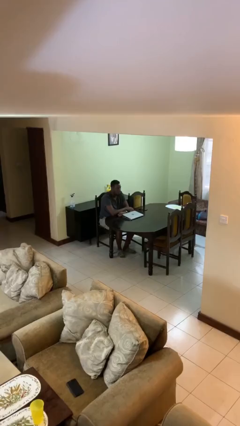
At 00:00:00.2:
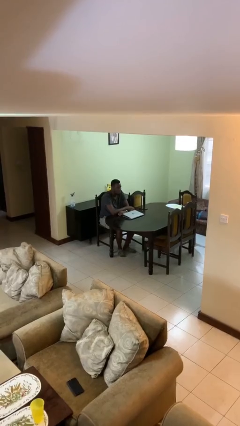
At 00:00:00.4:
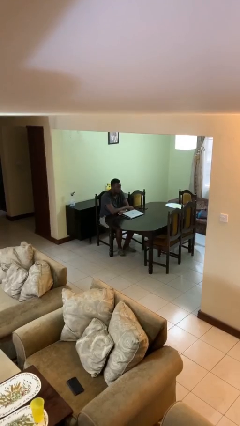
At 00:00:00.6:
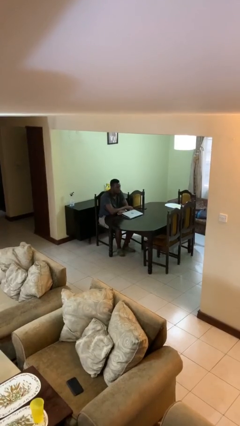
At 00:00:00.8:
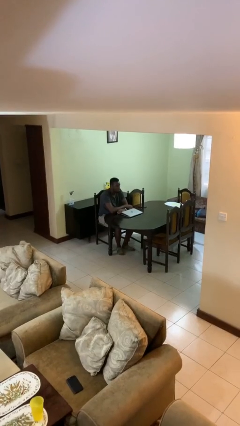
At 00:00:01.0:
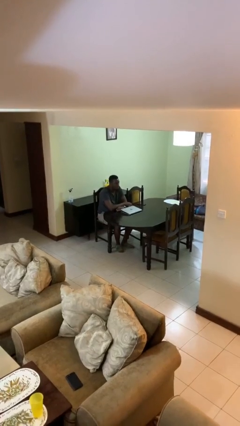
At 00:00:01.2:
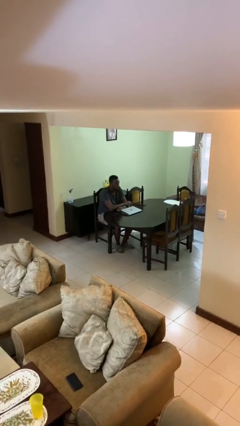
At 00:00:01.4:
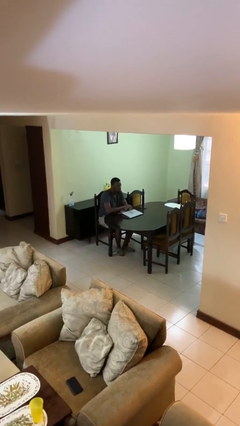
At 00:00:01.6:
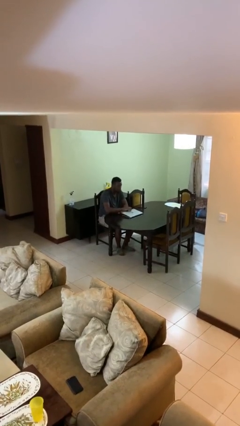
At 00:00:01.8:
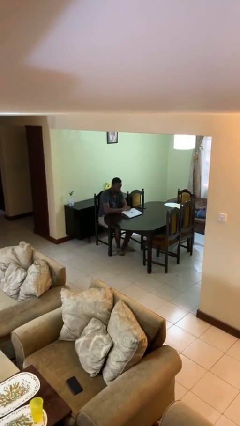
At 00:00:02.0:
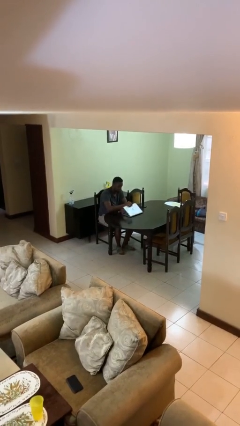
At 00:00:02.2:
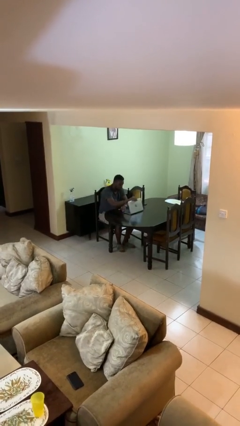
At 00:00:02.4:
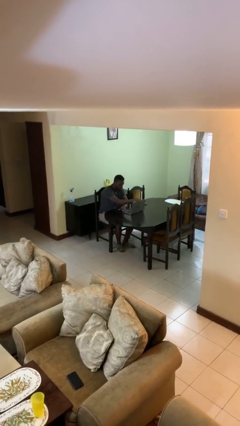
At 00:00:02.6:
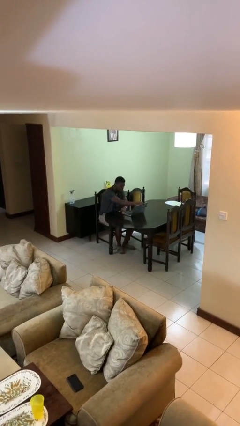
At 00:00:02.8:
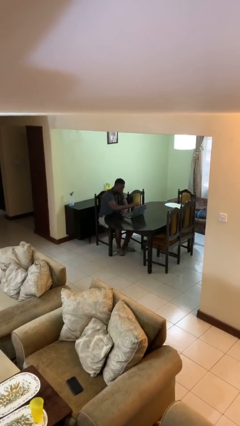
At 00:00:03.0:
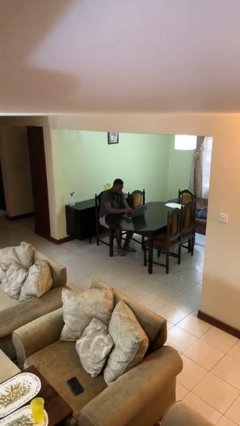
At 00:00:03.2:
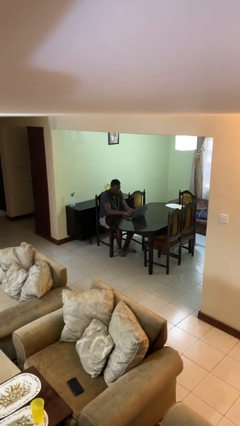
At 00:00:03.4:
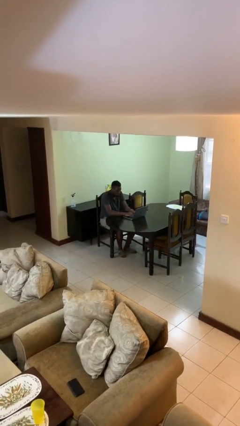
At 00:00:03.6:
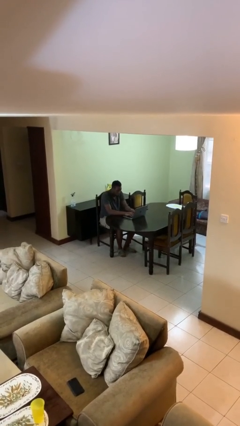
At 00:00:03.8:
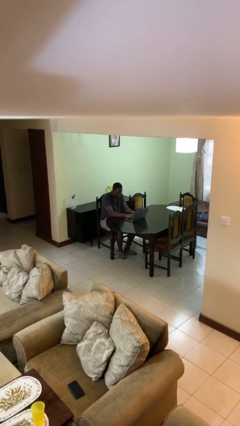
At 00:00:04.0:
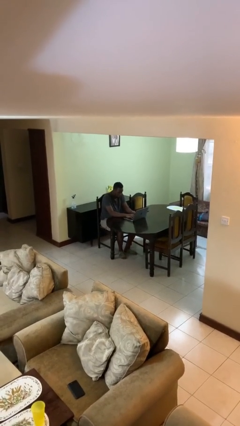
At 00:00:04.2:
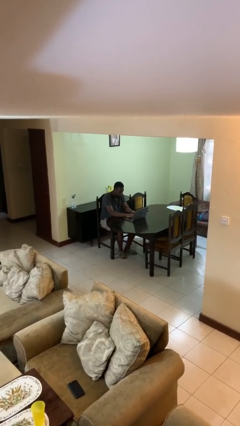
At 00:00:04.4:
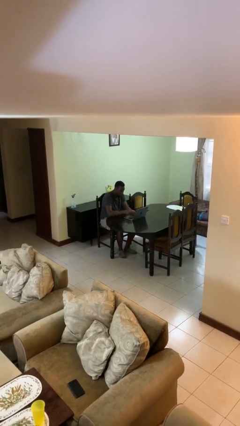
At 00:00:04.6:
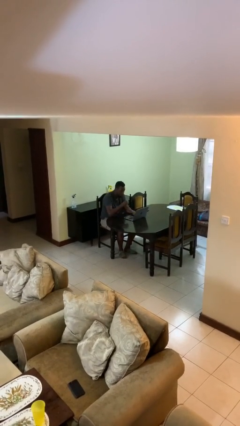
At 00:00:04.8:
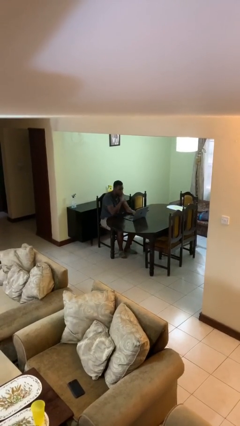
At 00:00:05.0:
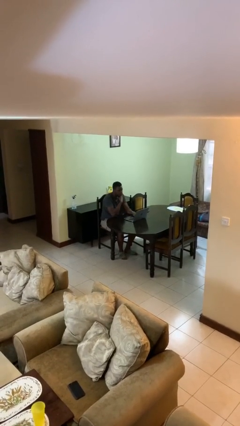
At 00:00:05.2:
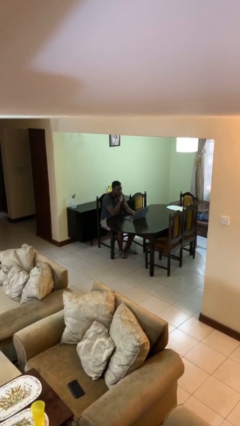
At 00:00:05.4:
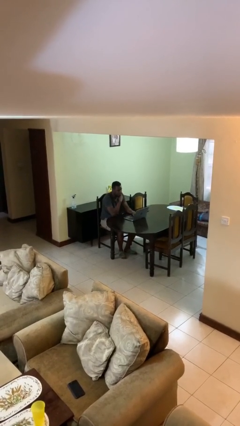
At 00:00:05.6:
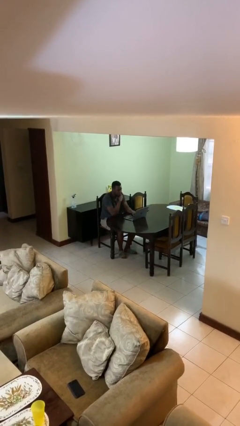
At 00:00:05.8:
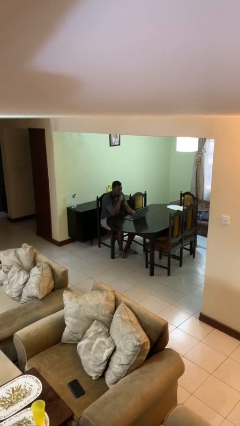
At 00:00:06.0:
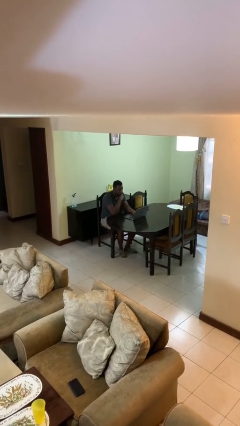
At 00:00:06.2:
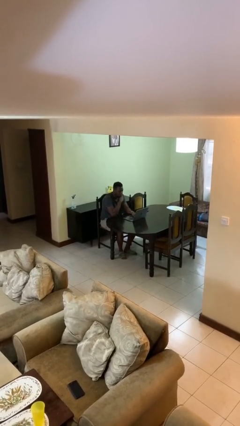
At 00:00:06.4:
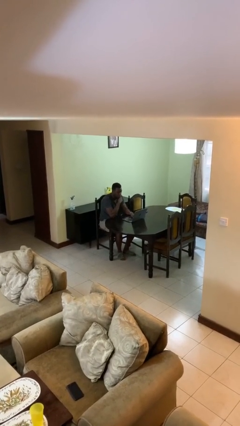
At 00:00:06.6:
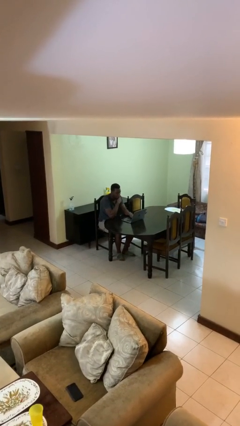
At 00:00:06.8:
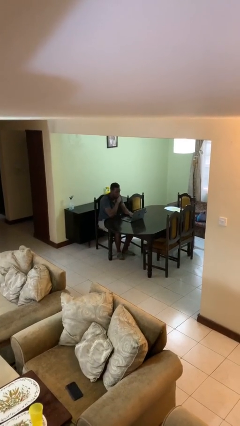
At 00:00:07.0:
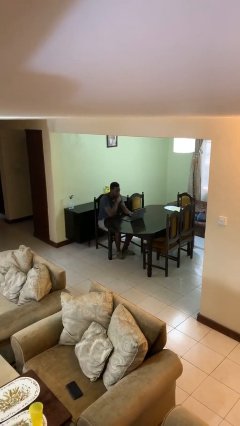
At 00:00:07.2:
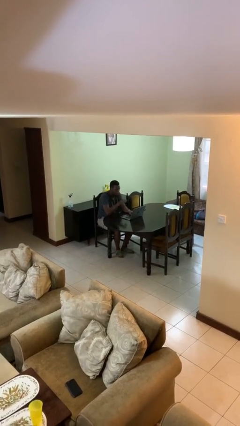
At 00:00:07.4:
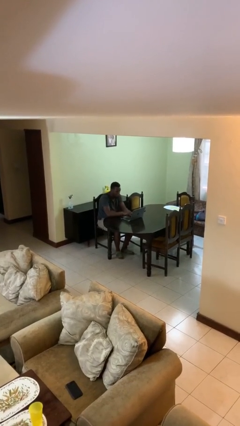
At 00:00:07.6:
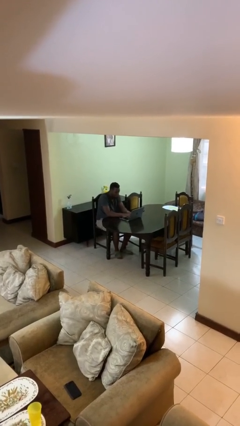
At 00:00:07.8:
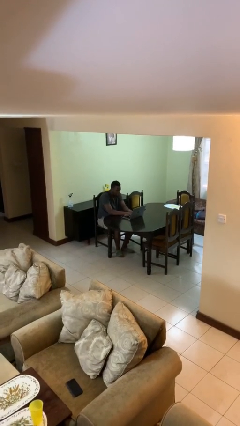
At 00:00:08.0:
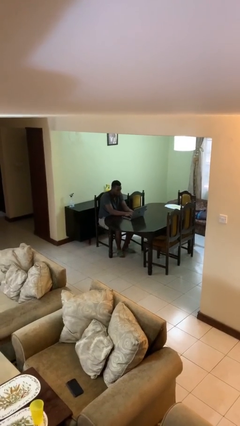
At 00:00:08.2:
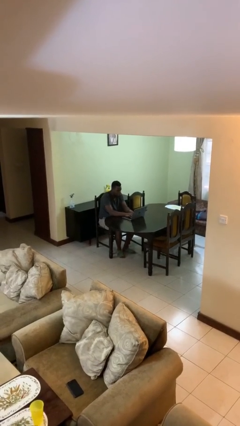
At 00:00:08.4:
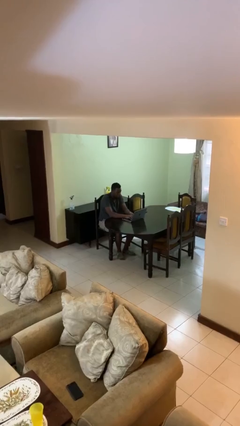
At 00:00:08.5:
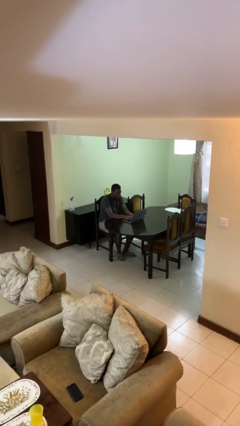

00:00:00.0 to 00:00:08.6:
person interacts with laptop

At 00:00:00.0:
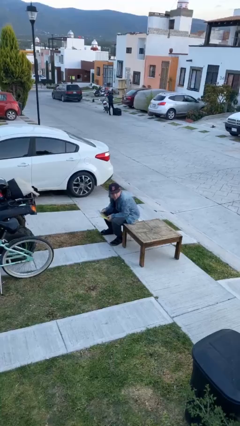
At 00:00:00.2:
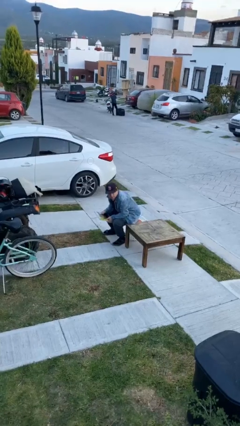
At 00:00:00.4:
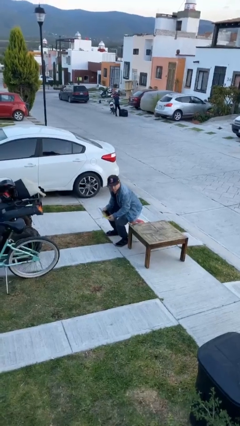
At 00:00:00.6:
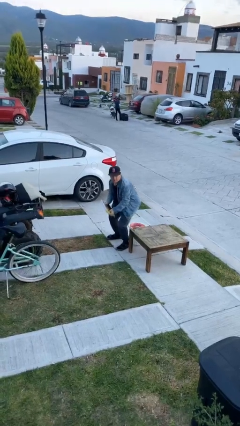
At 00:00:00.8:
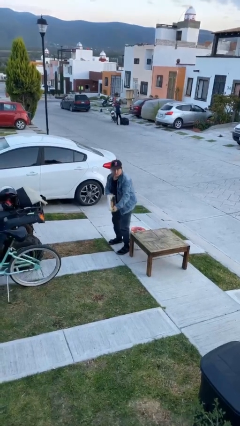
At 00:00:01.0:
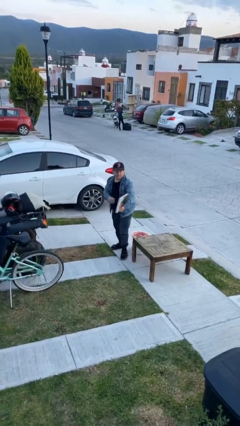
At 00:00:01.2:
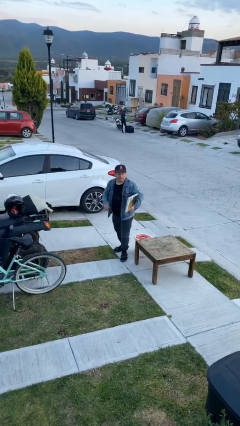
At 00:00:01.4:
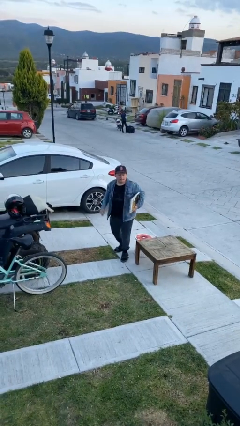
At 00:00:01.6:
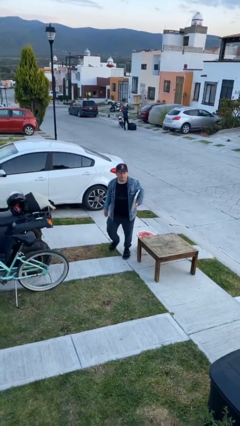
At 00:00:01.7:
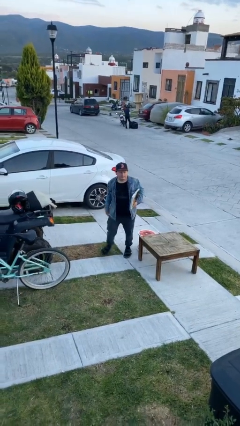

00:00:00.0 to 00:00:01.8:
person stands up

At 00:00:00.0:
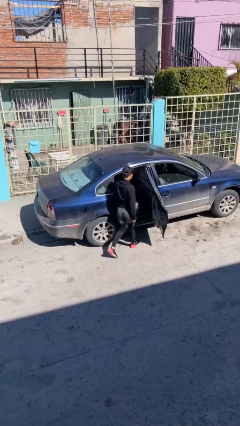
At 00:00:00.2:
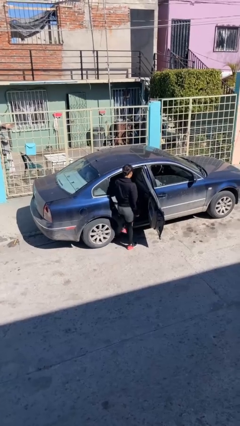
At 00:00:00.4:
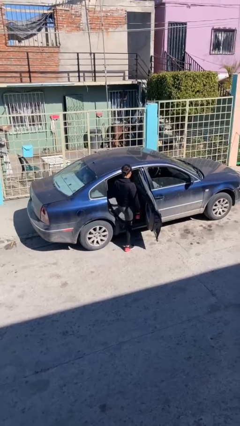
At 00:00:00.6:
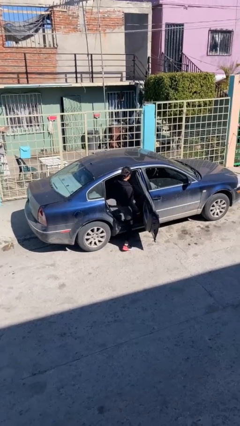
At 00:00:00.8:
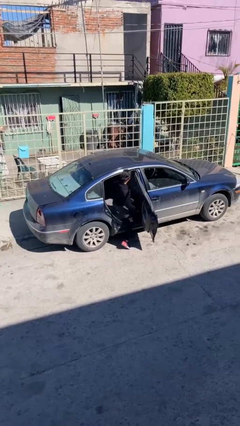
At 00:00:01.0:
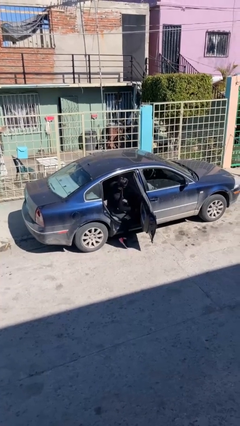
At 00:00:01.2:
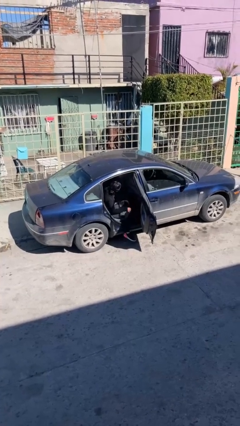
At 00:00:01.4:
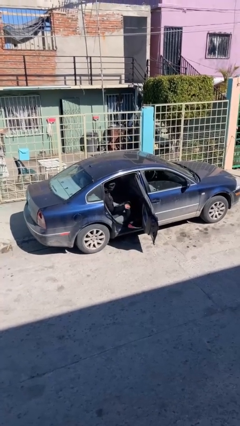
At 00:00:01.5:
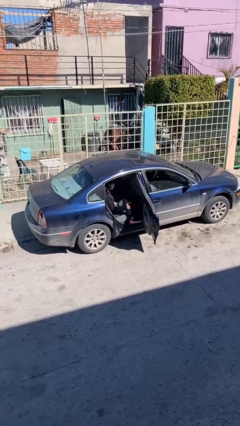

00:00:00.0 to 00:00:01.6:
person enters car

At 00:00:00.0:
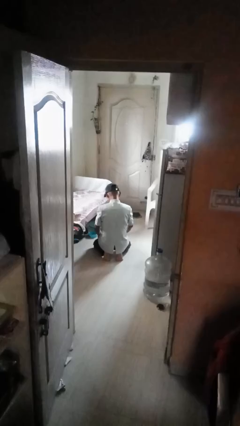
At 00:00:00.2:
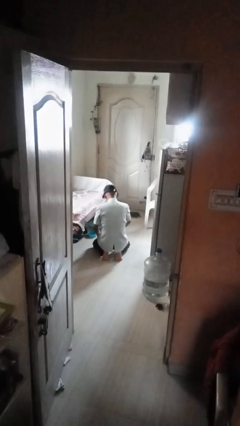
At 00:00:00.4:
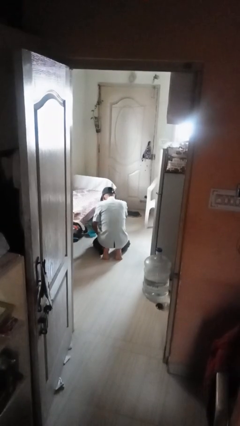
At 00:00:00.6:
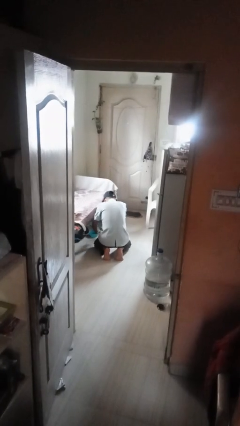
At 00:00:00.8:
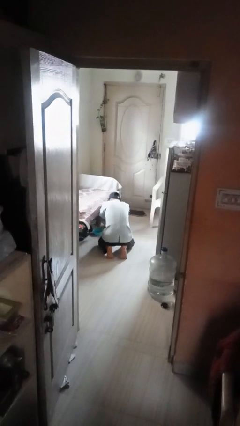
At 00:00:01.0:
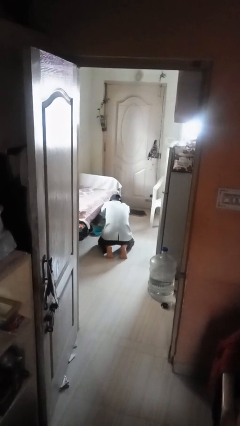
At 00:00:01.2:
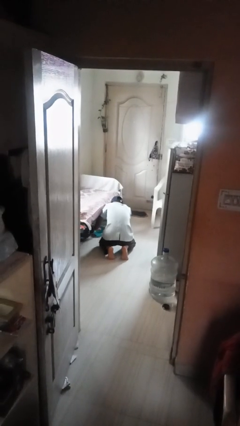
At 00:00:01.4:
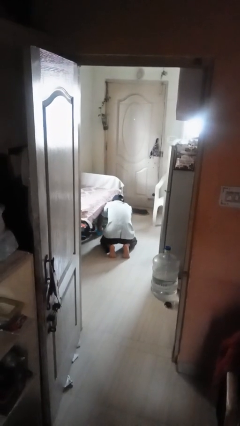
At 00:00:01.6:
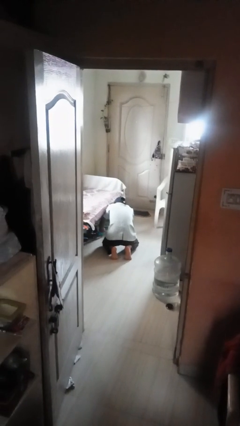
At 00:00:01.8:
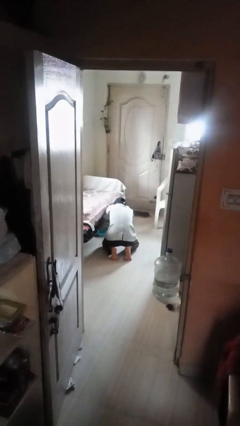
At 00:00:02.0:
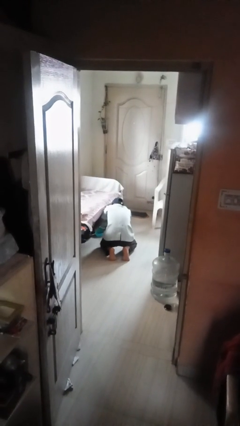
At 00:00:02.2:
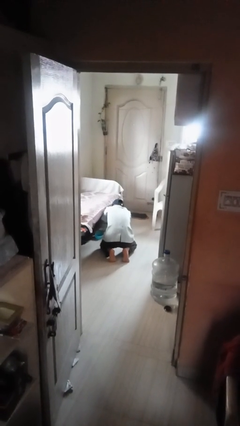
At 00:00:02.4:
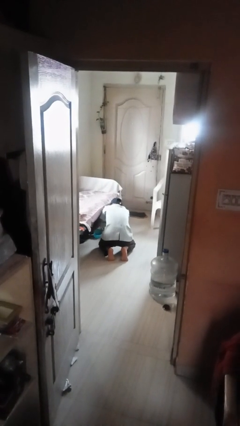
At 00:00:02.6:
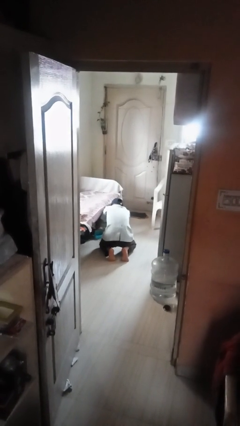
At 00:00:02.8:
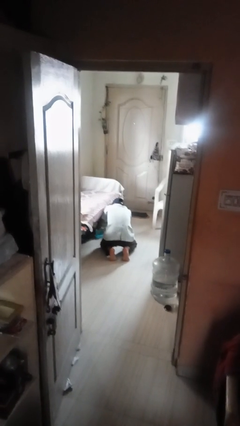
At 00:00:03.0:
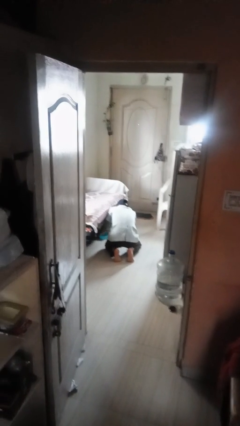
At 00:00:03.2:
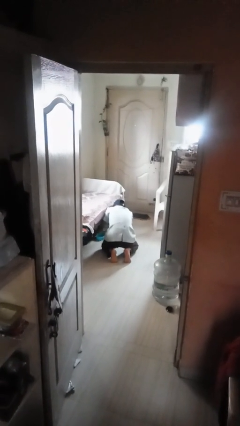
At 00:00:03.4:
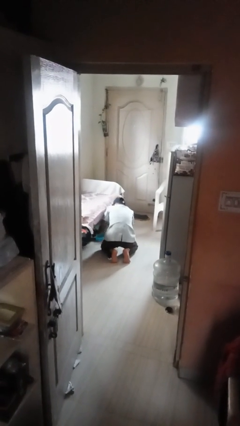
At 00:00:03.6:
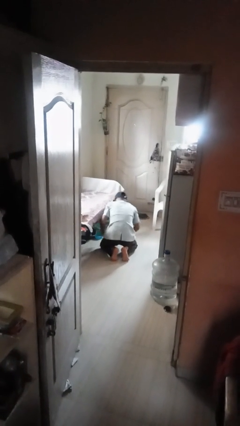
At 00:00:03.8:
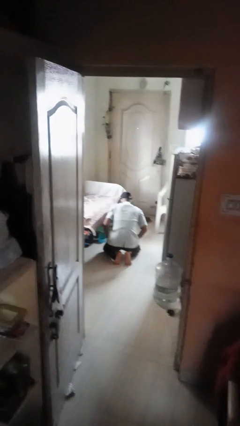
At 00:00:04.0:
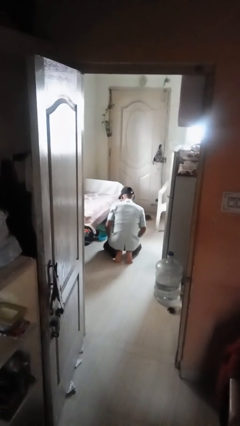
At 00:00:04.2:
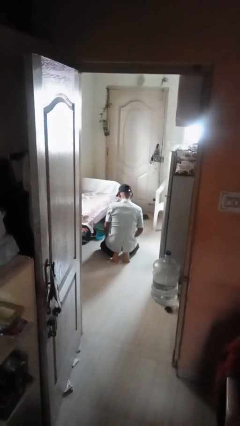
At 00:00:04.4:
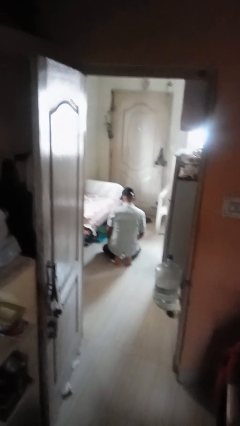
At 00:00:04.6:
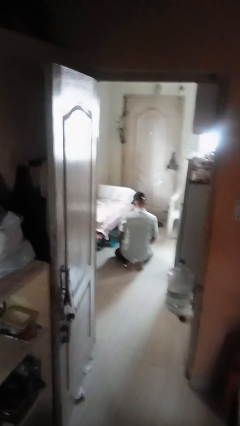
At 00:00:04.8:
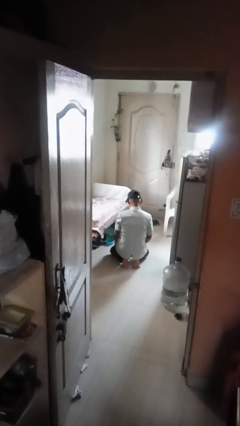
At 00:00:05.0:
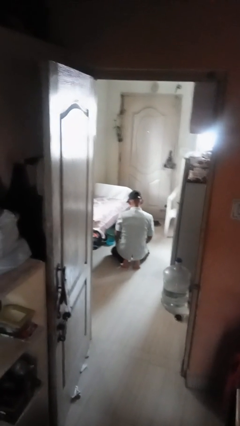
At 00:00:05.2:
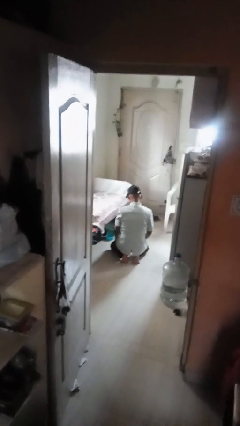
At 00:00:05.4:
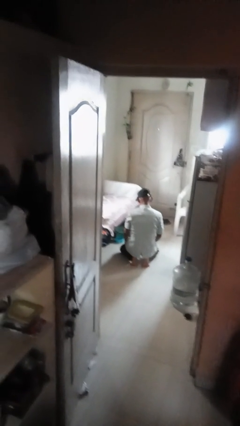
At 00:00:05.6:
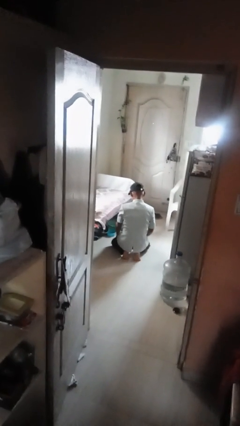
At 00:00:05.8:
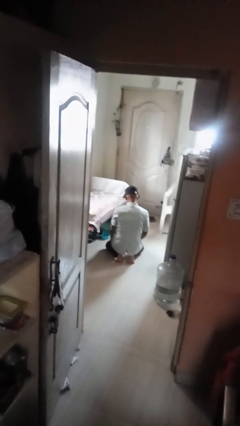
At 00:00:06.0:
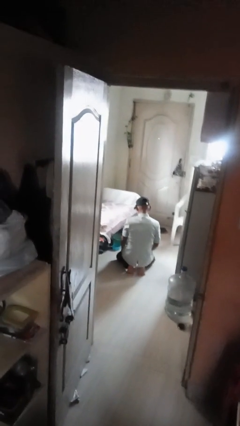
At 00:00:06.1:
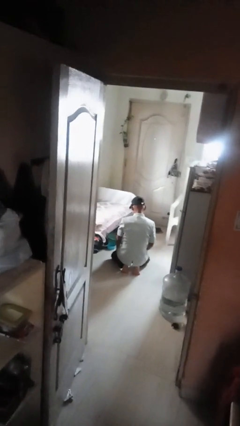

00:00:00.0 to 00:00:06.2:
person searches under bed
